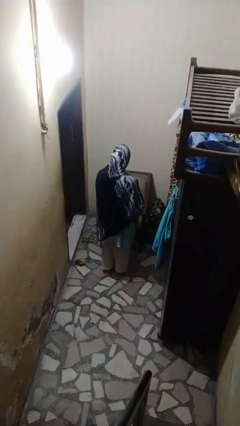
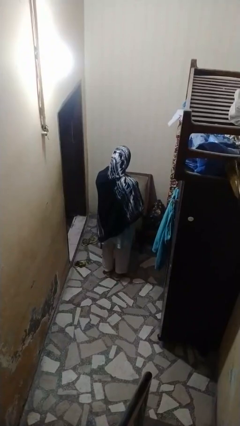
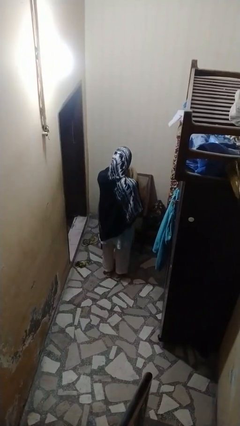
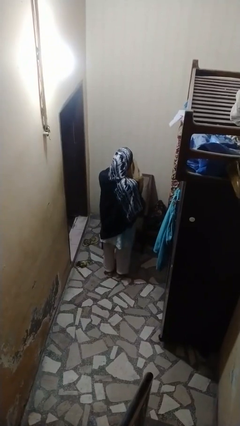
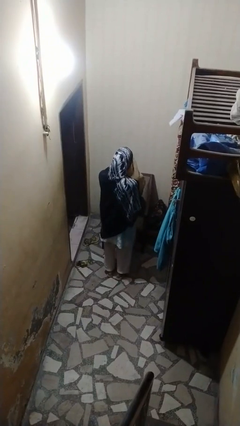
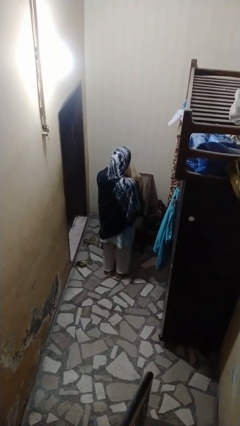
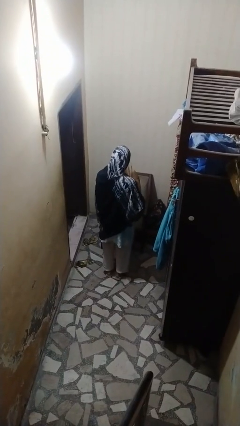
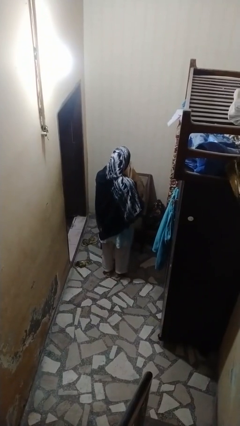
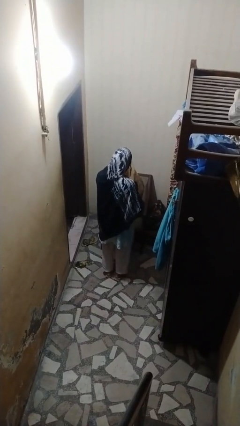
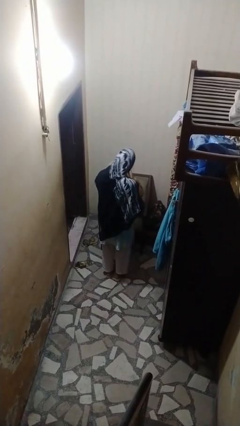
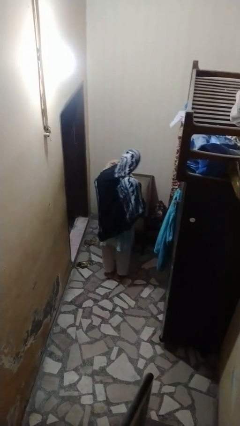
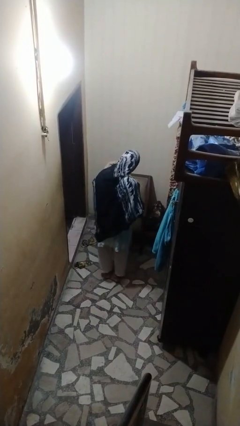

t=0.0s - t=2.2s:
person searches in bag

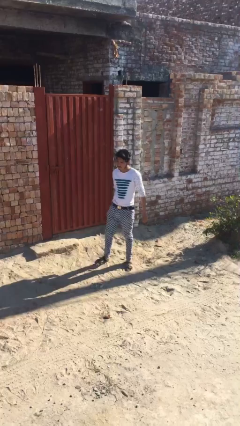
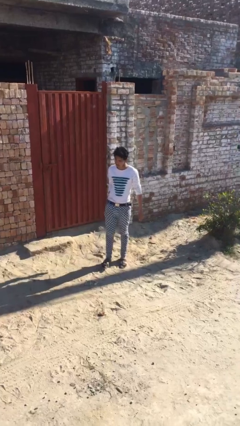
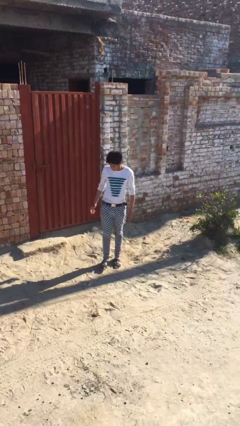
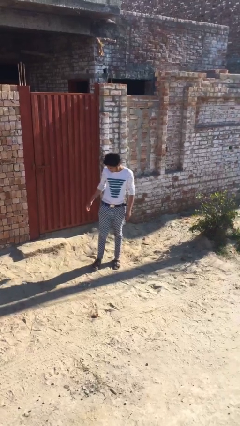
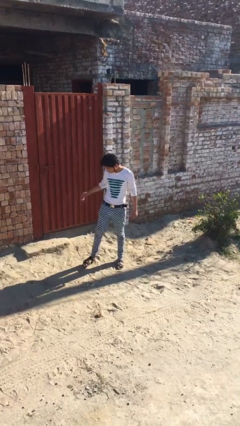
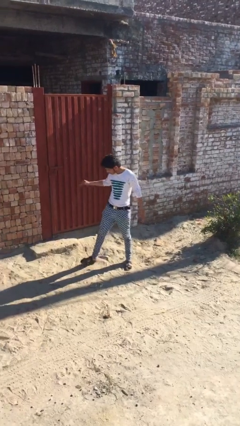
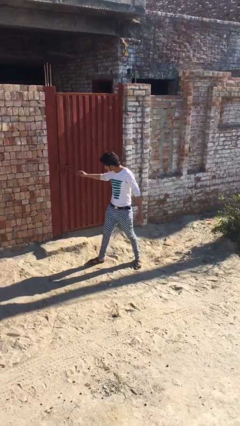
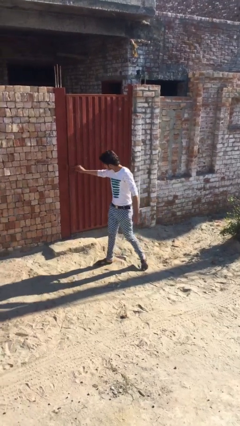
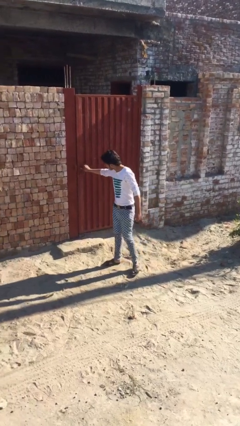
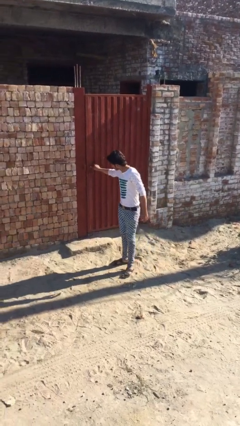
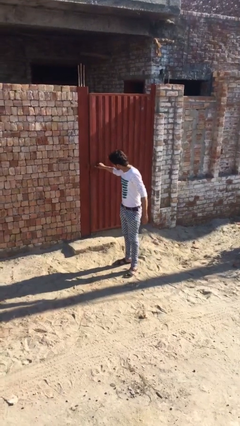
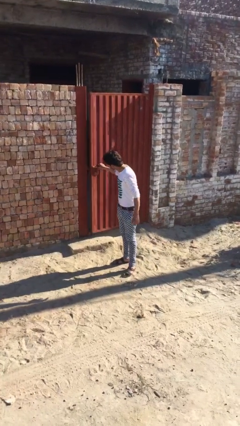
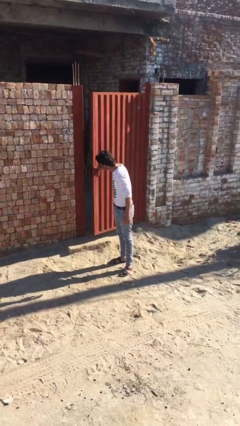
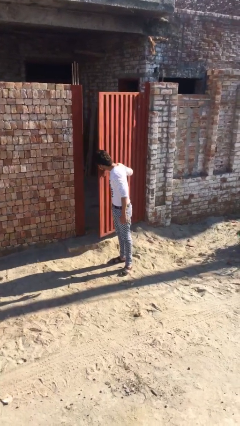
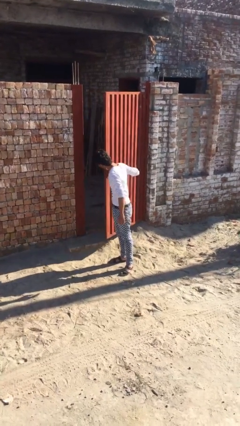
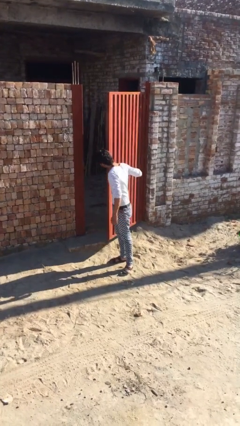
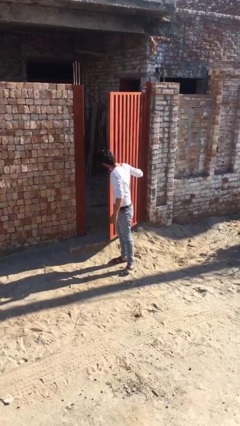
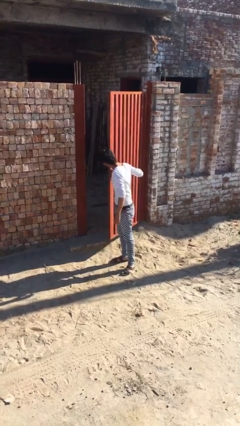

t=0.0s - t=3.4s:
person opens facility door

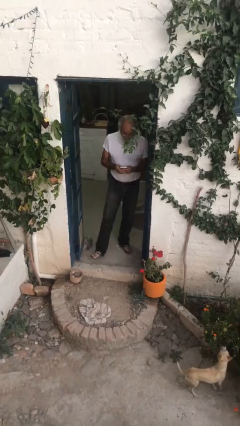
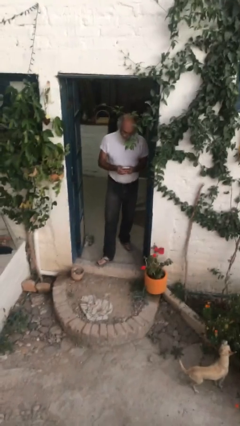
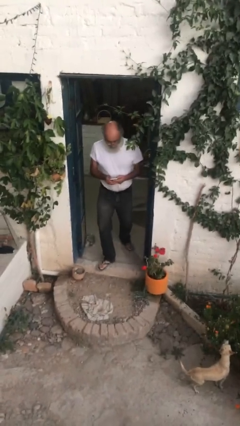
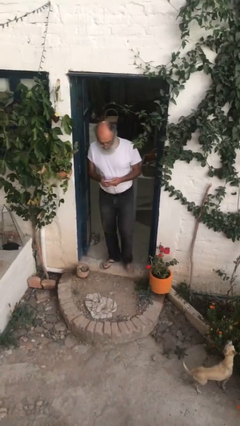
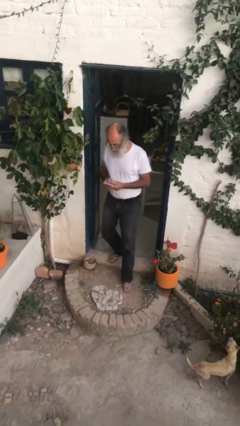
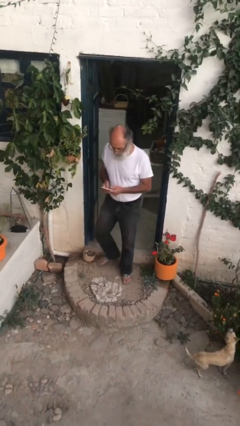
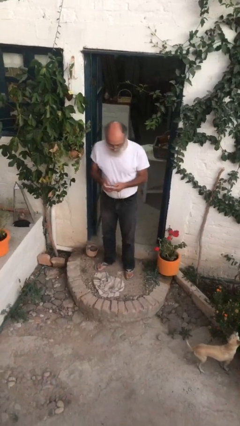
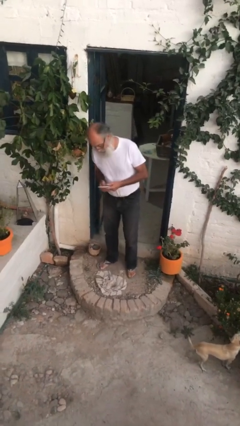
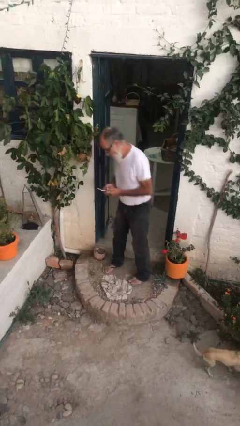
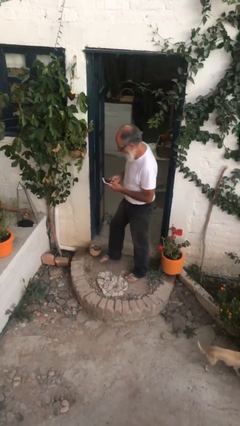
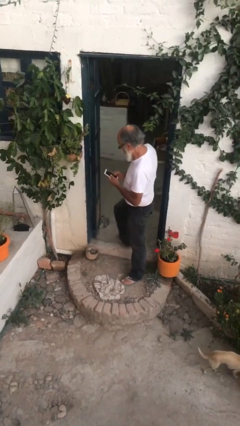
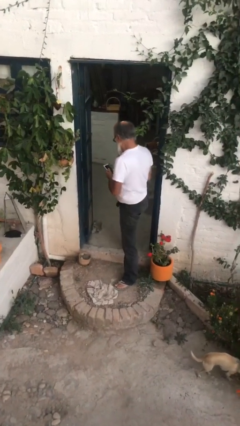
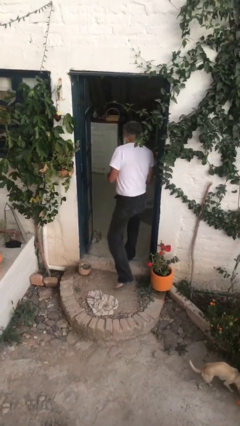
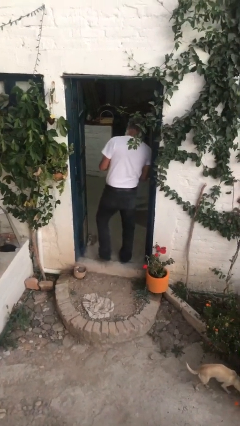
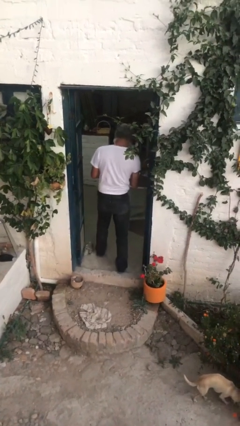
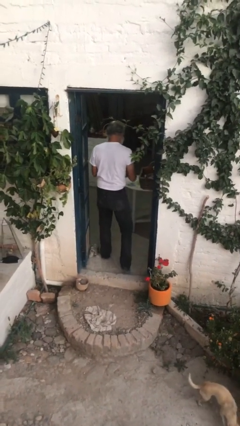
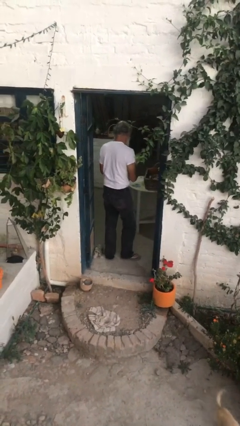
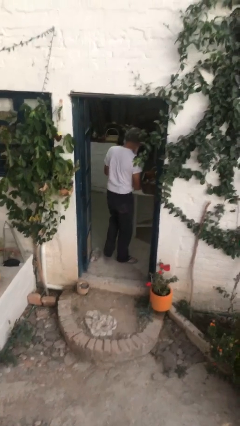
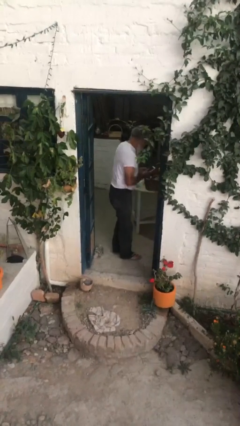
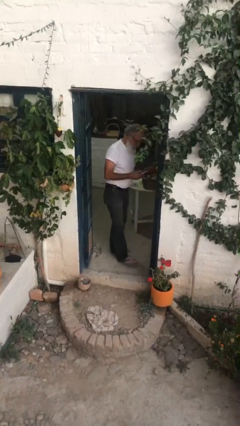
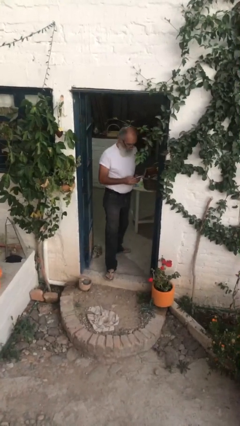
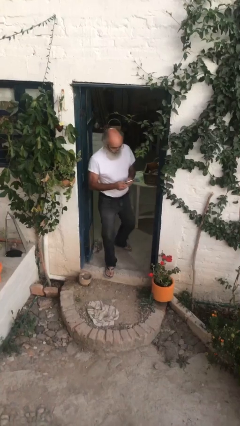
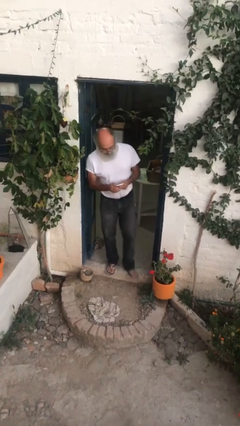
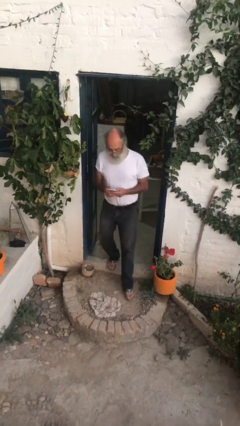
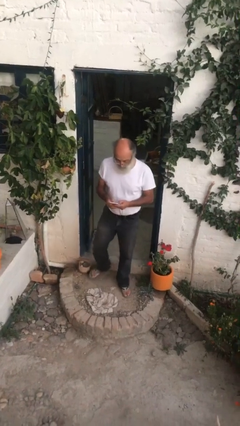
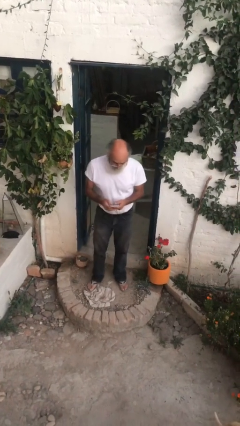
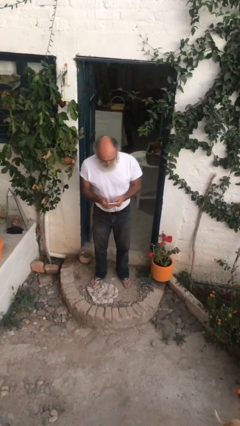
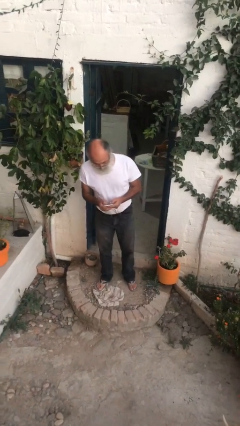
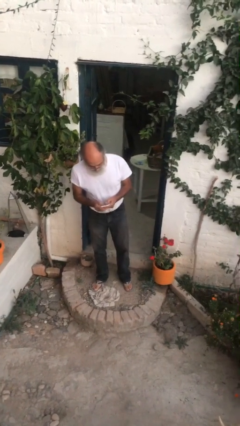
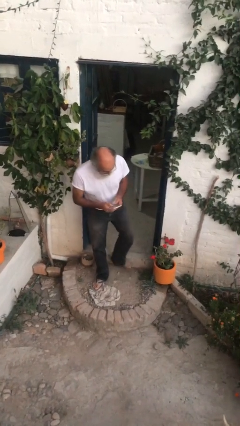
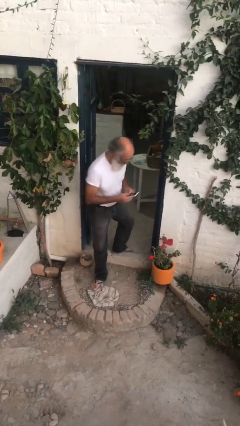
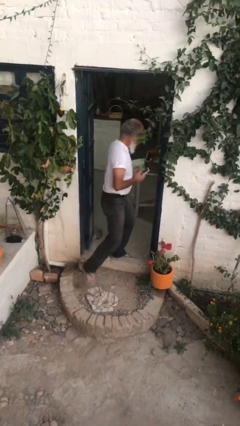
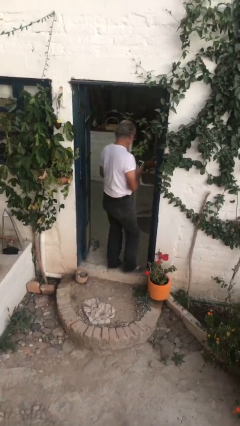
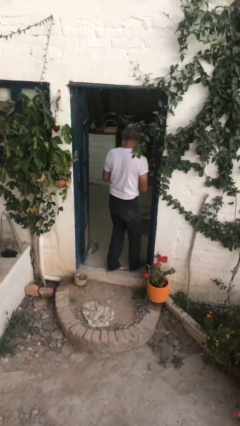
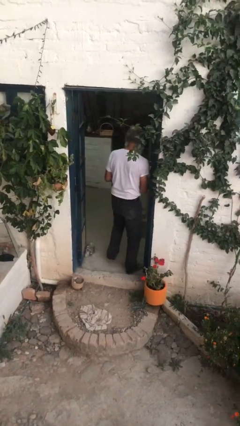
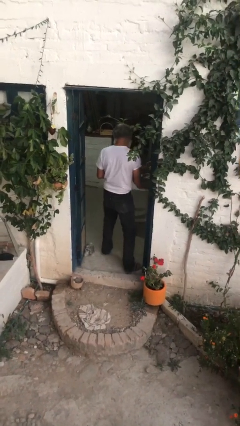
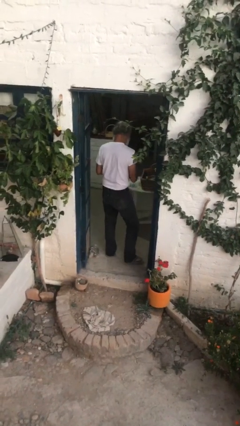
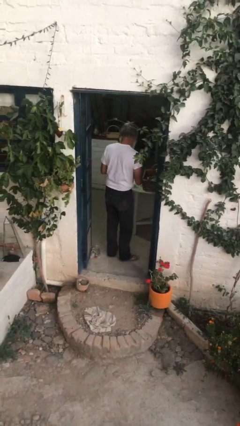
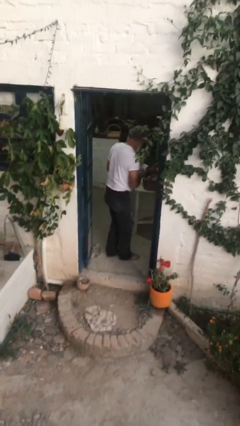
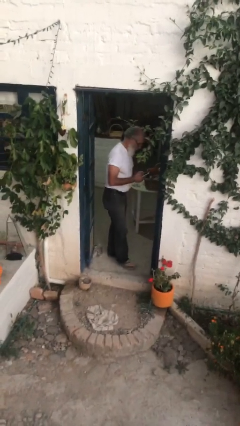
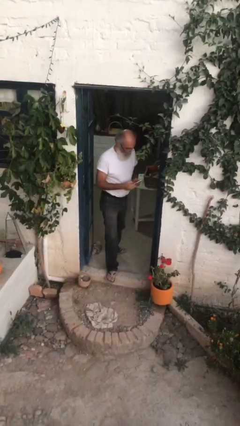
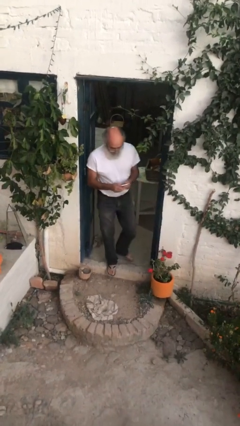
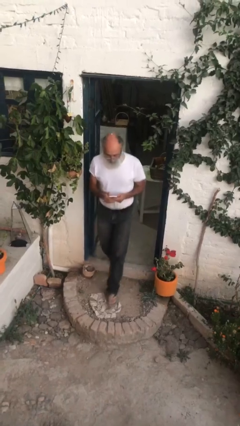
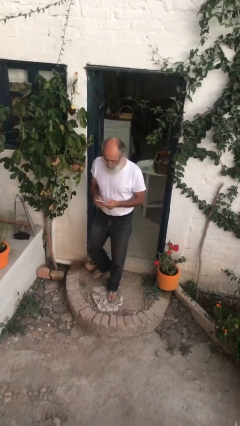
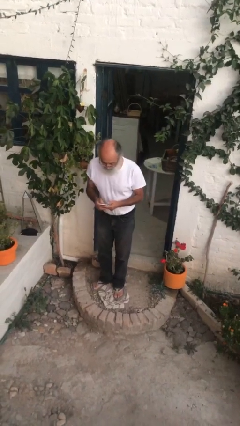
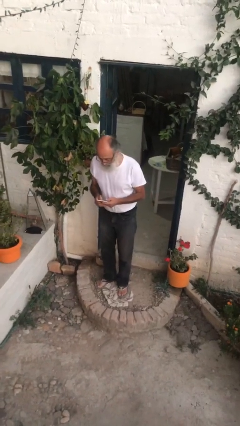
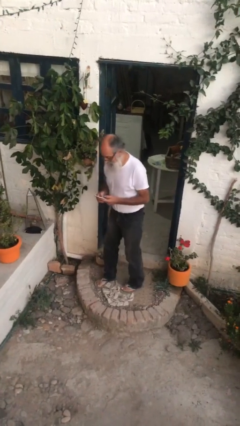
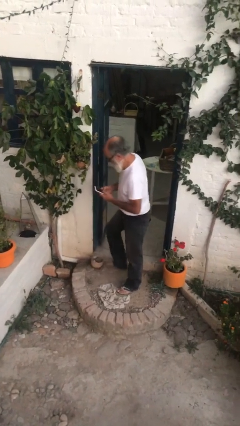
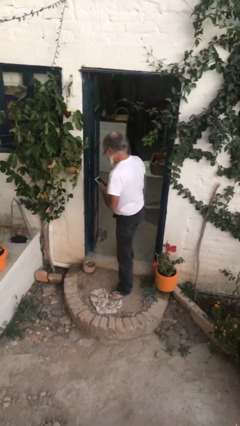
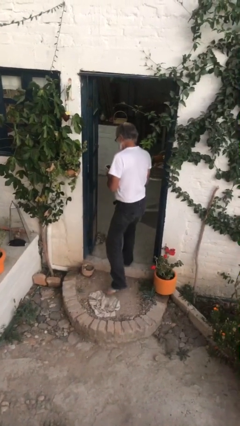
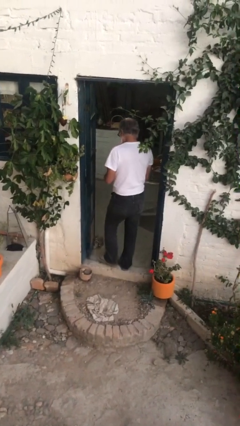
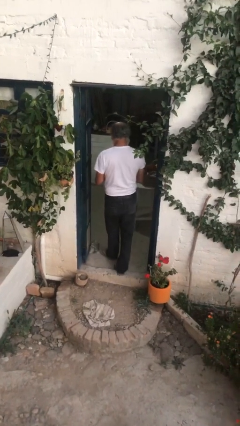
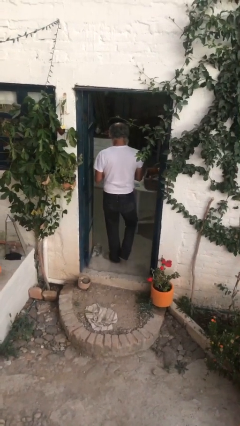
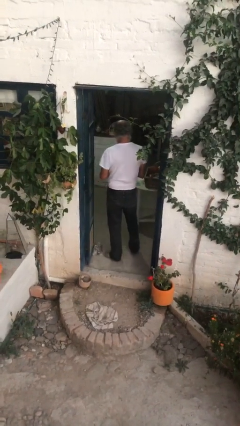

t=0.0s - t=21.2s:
person texts on phone

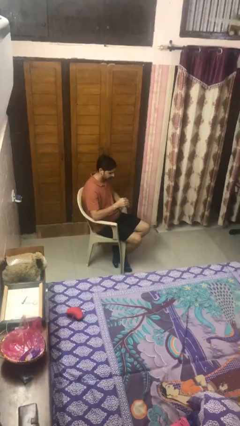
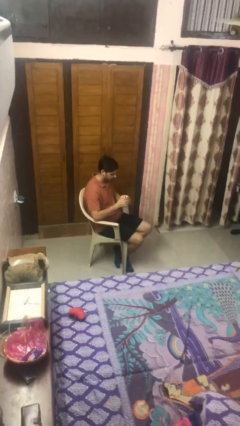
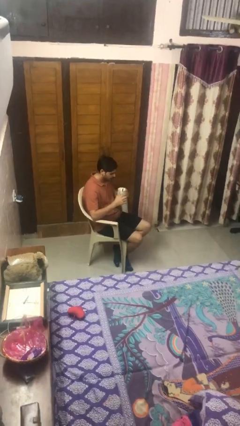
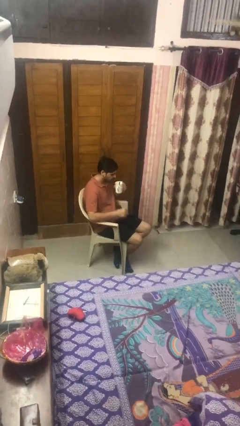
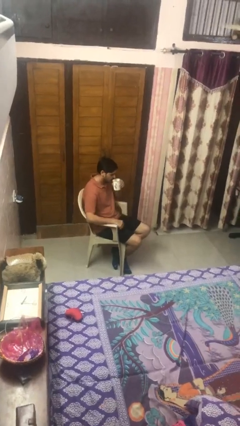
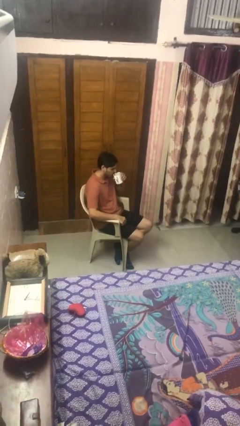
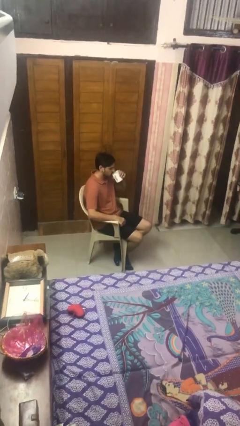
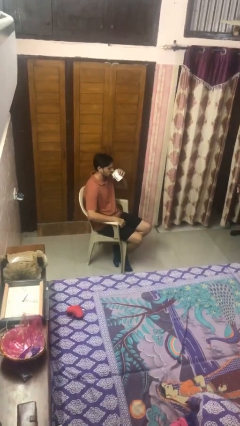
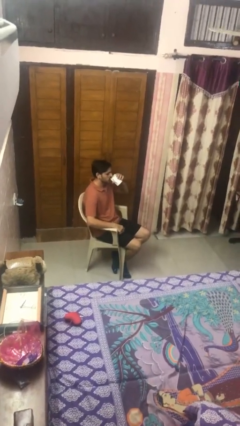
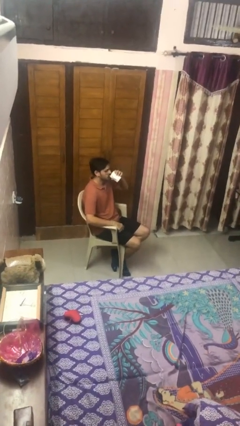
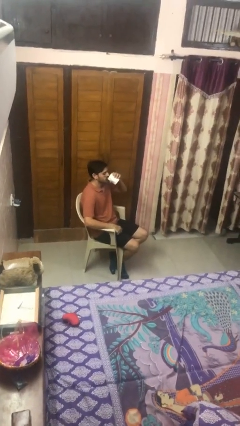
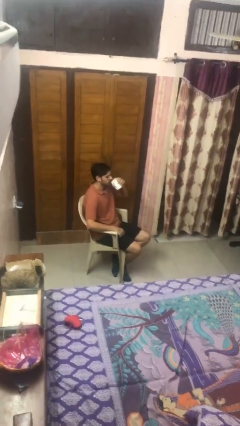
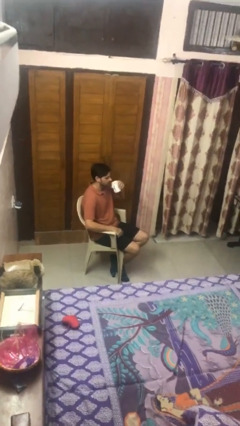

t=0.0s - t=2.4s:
person drinks from mug
